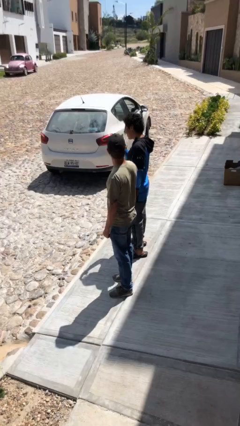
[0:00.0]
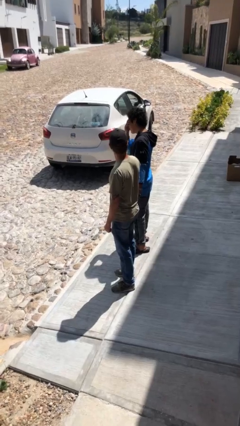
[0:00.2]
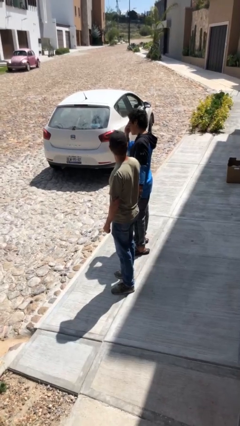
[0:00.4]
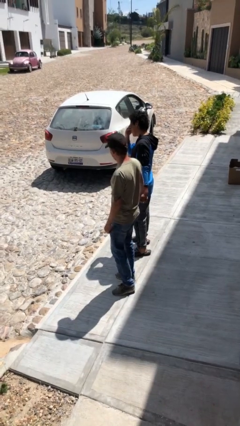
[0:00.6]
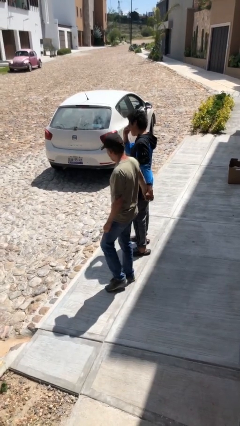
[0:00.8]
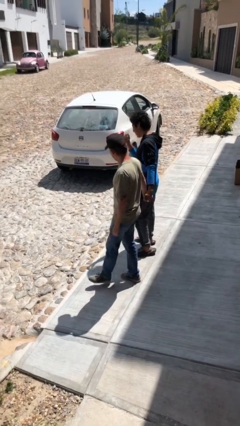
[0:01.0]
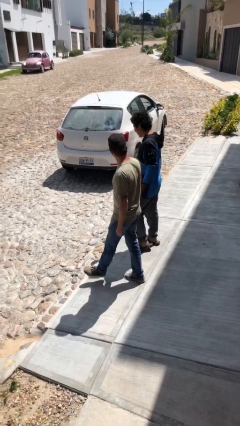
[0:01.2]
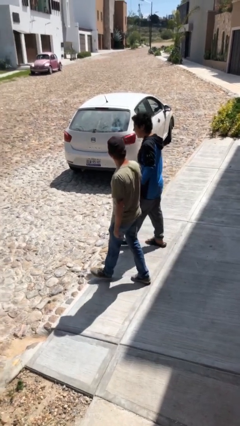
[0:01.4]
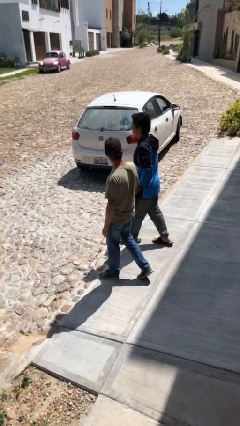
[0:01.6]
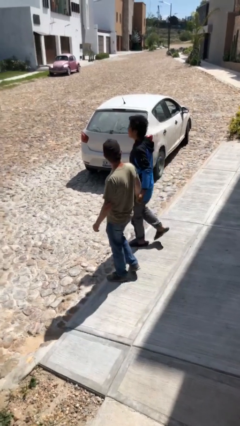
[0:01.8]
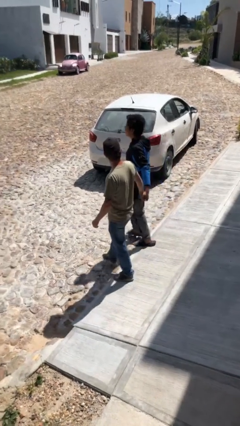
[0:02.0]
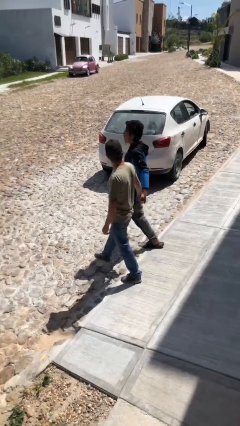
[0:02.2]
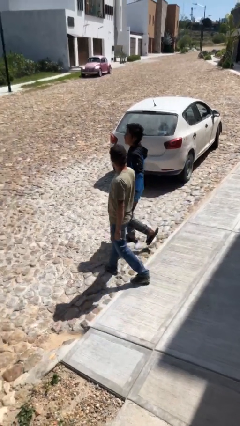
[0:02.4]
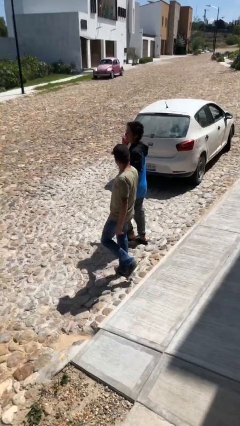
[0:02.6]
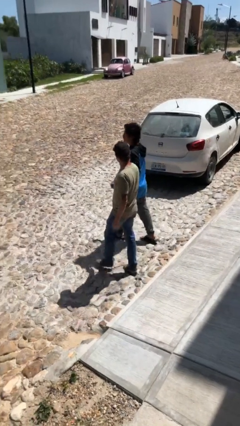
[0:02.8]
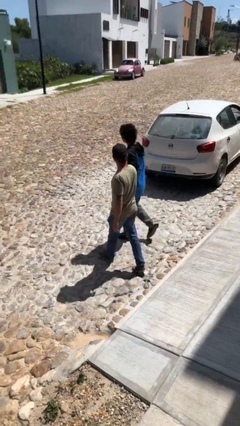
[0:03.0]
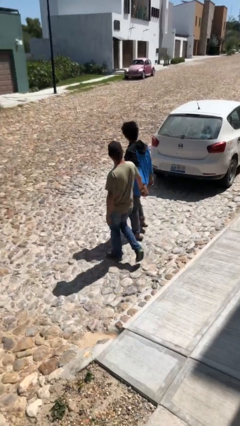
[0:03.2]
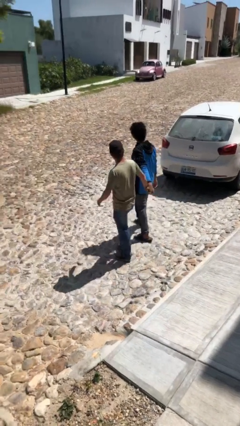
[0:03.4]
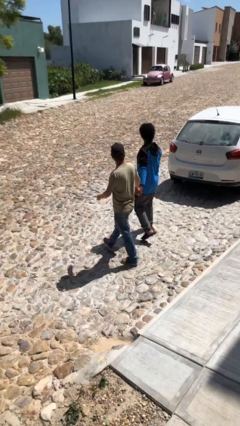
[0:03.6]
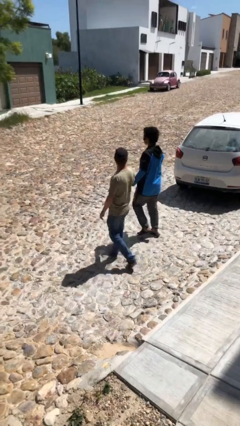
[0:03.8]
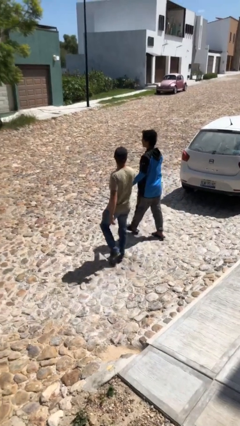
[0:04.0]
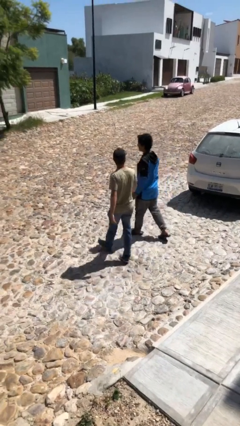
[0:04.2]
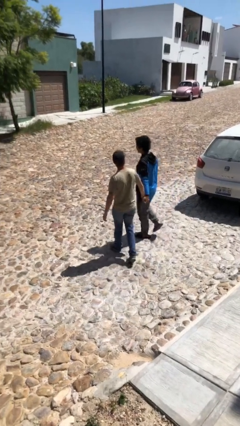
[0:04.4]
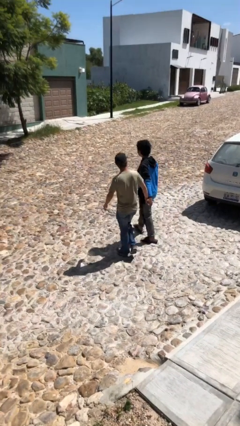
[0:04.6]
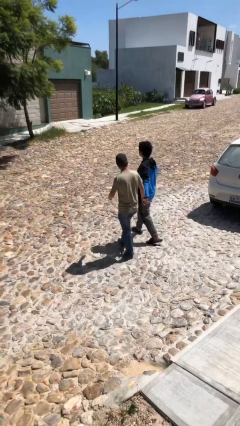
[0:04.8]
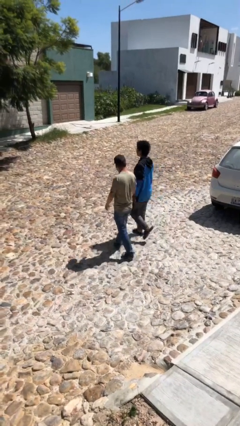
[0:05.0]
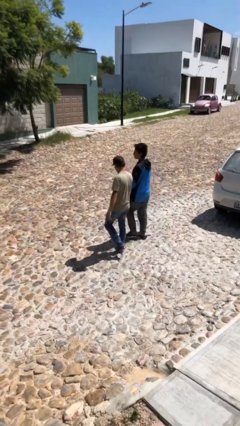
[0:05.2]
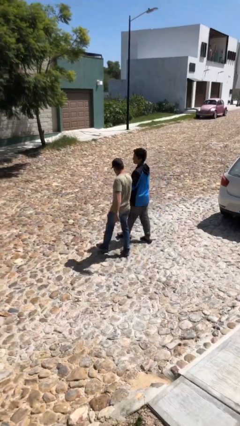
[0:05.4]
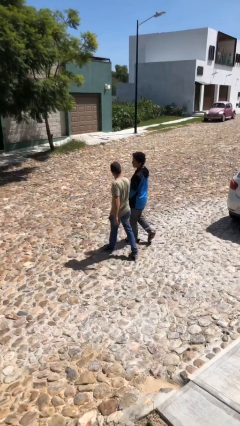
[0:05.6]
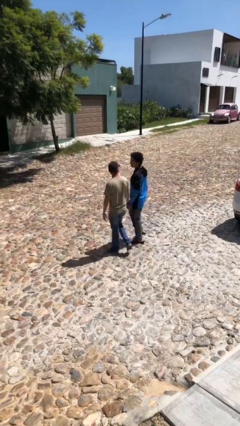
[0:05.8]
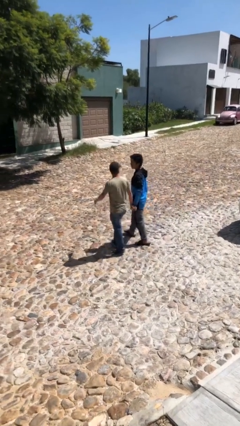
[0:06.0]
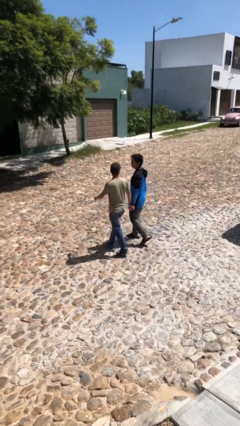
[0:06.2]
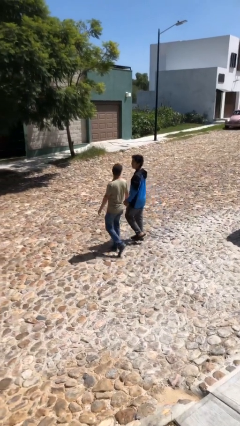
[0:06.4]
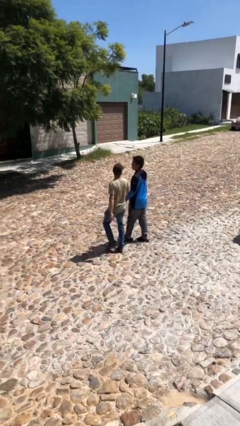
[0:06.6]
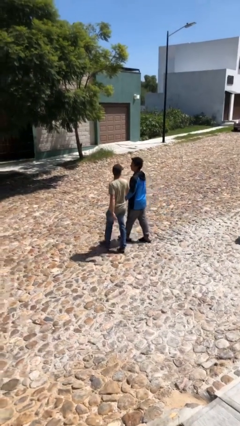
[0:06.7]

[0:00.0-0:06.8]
person holds hand

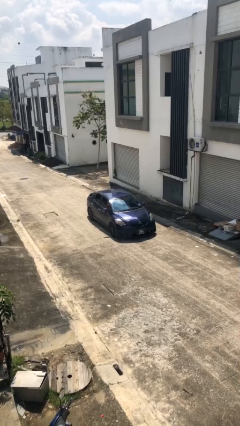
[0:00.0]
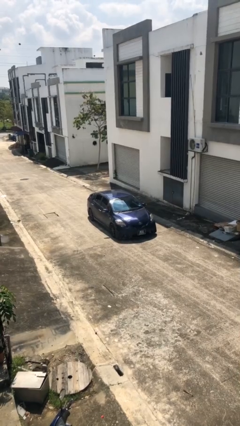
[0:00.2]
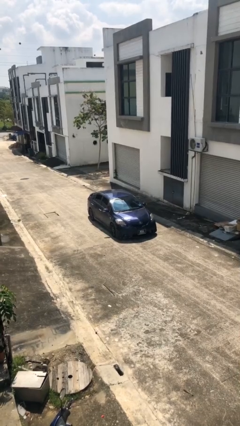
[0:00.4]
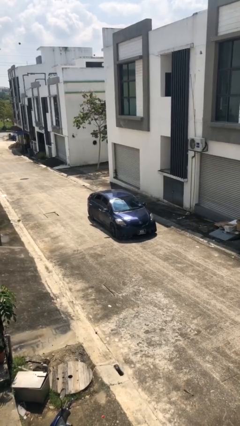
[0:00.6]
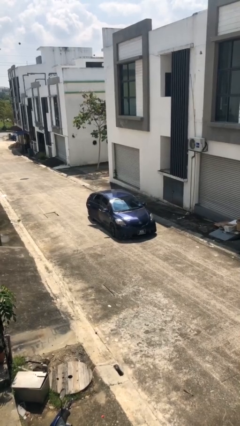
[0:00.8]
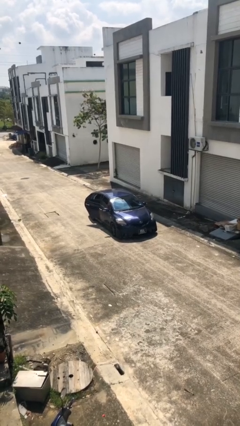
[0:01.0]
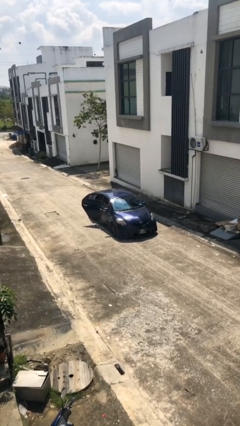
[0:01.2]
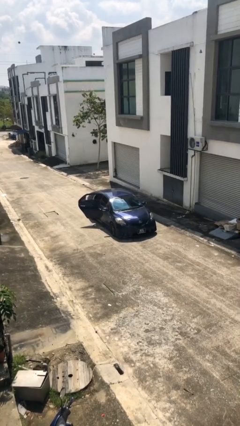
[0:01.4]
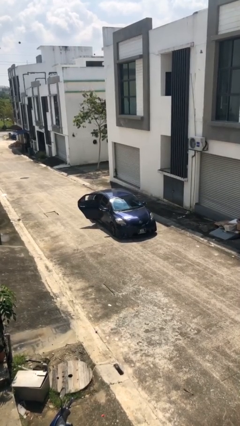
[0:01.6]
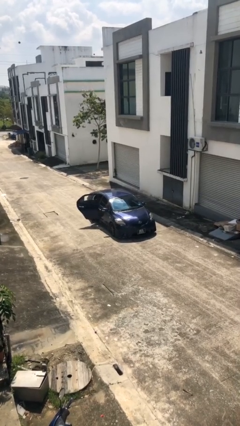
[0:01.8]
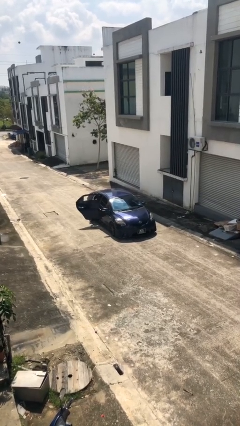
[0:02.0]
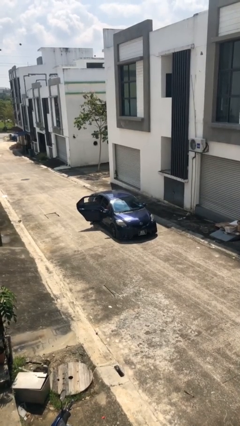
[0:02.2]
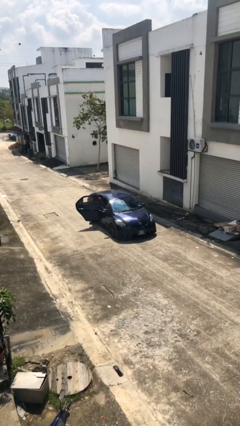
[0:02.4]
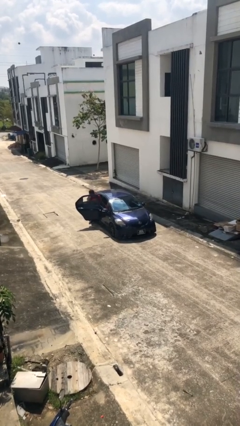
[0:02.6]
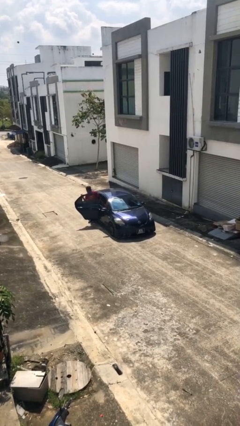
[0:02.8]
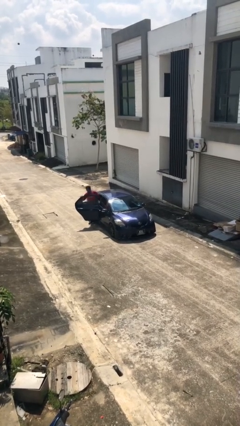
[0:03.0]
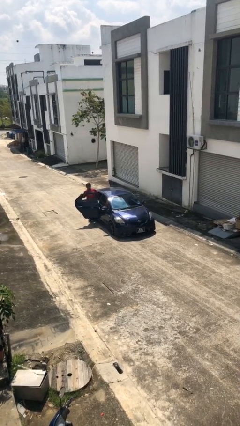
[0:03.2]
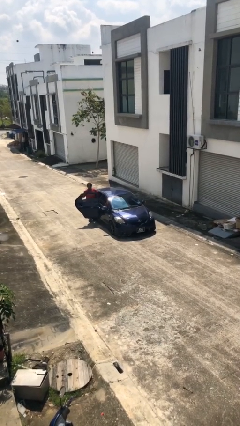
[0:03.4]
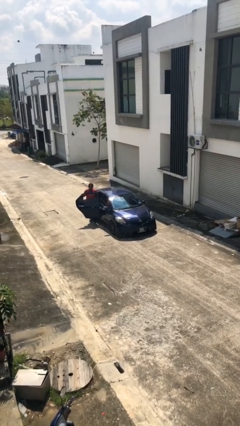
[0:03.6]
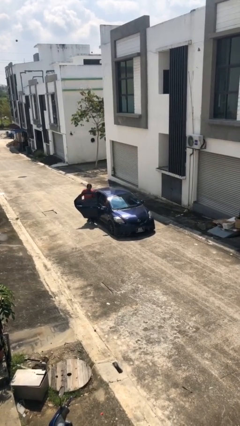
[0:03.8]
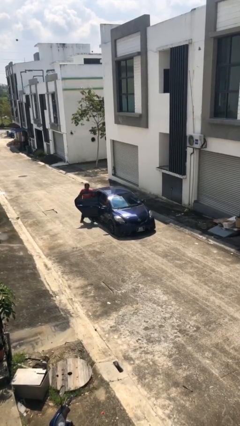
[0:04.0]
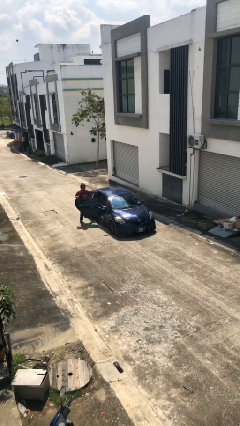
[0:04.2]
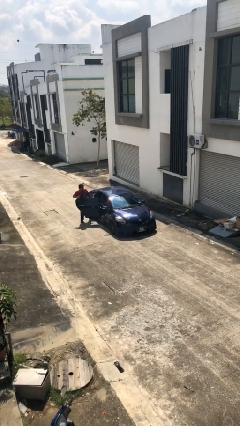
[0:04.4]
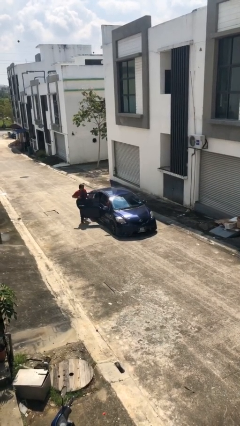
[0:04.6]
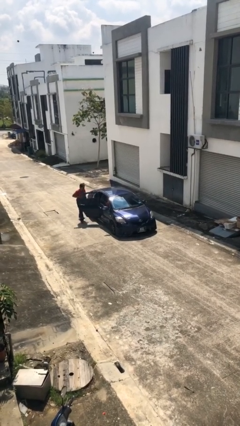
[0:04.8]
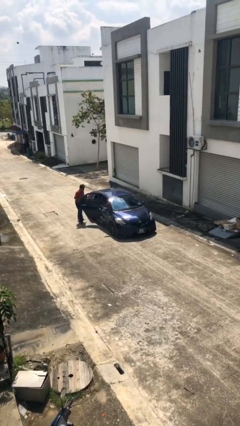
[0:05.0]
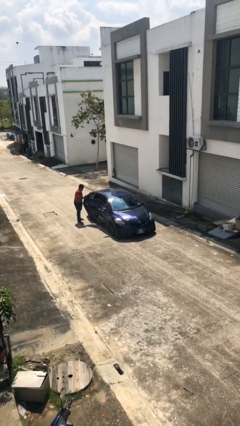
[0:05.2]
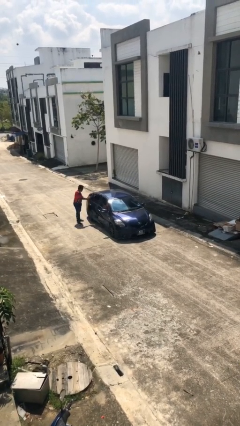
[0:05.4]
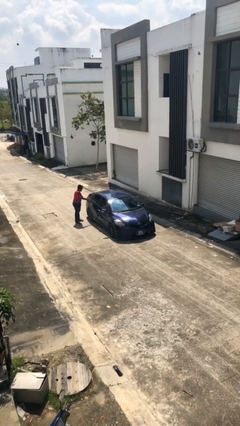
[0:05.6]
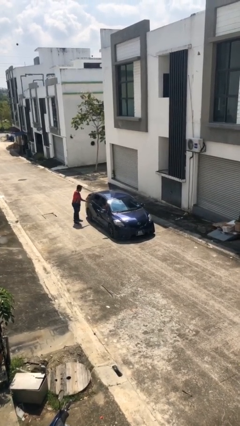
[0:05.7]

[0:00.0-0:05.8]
car drops off person

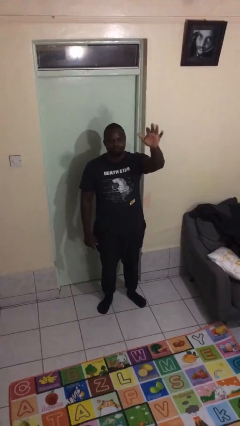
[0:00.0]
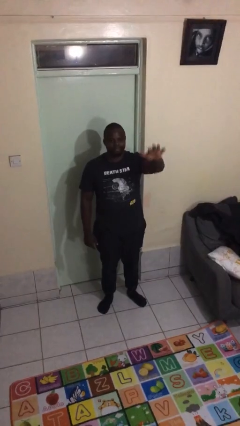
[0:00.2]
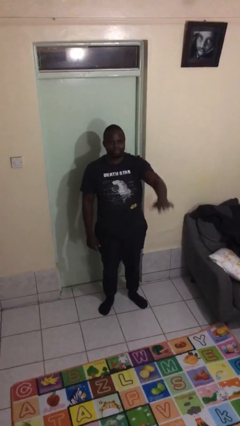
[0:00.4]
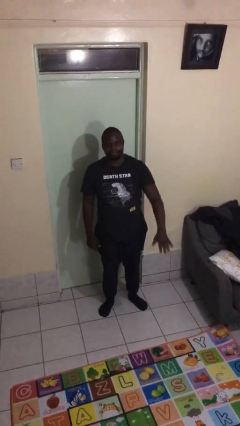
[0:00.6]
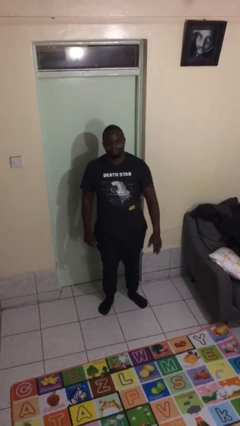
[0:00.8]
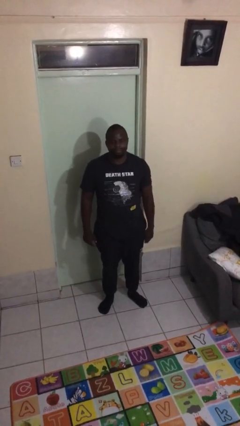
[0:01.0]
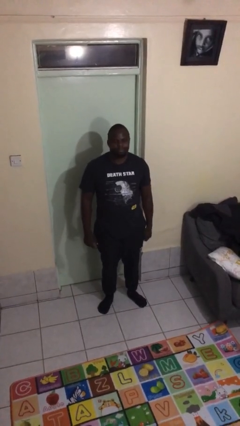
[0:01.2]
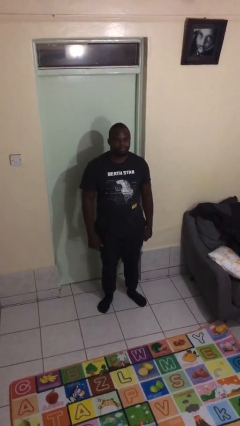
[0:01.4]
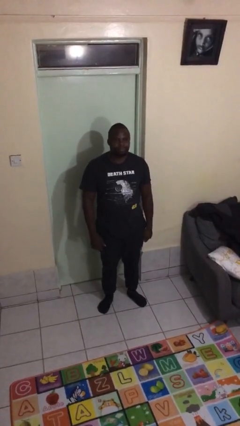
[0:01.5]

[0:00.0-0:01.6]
person gestures swipe down

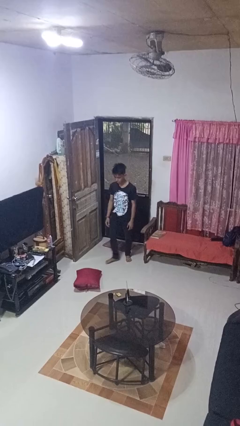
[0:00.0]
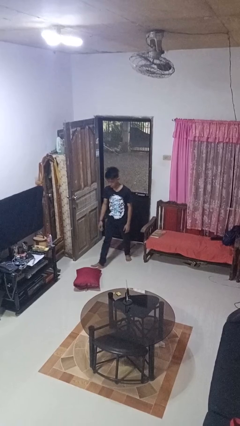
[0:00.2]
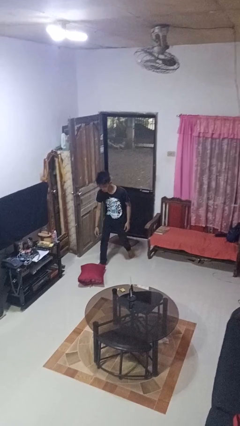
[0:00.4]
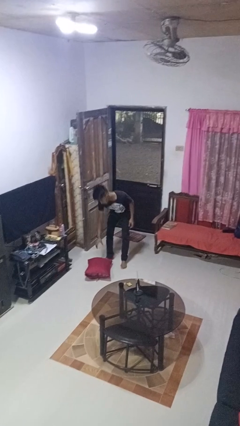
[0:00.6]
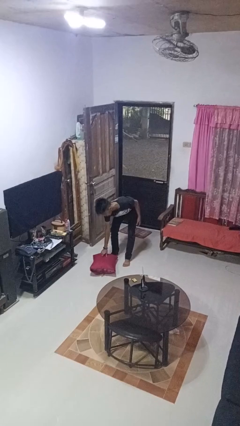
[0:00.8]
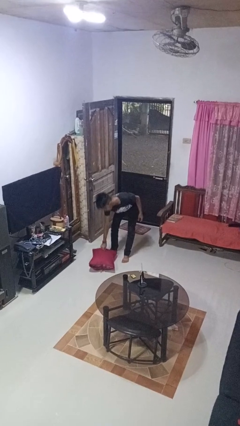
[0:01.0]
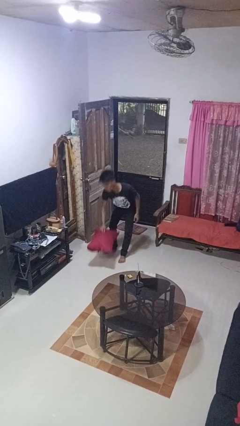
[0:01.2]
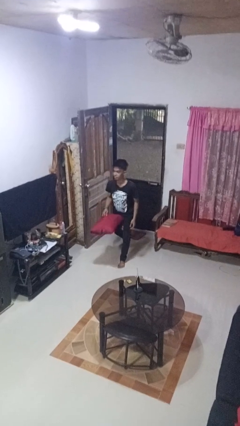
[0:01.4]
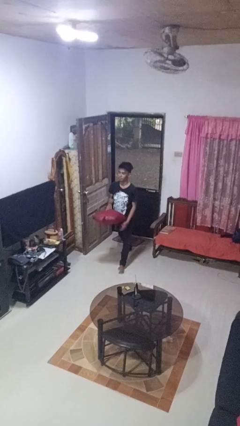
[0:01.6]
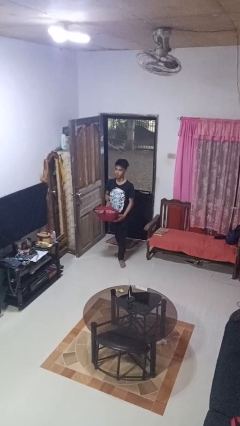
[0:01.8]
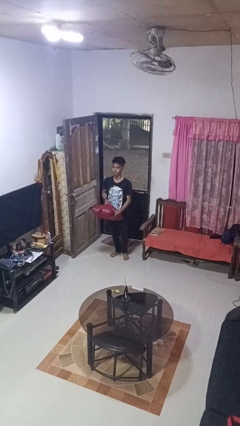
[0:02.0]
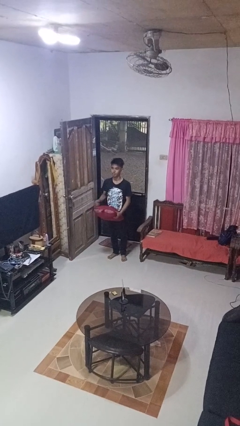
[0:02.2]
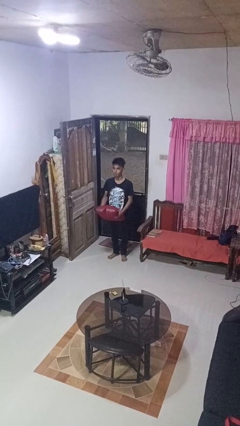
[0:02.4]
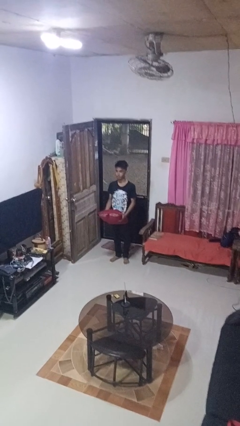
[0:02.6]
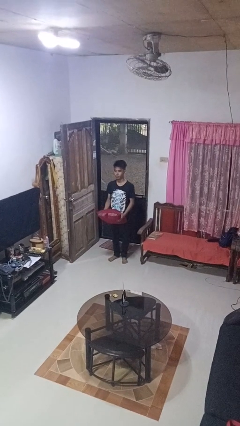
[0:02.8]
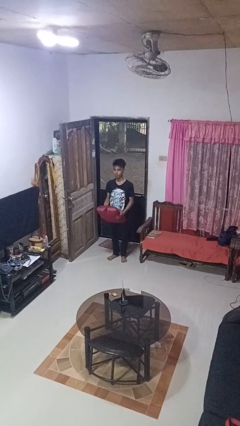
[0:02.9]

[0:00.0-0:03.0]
person picks up object from floor

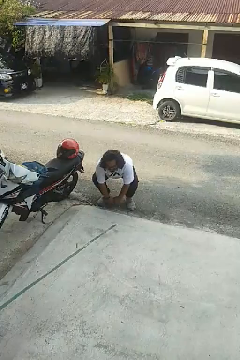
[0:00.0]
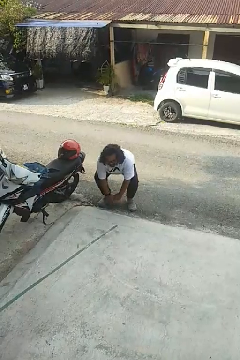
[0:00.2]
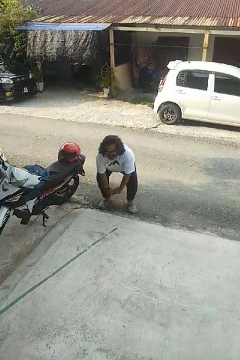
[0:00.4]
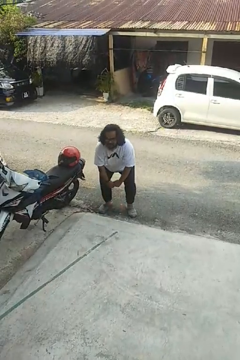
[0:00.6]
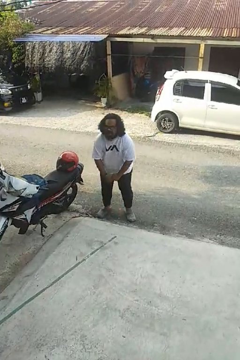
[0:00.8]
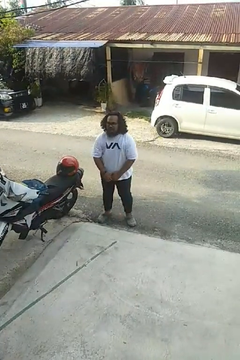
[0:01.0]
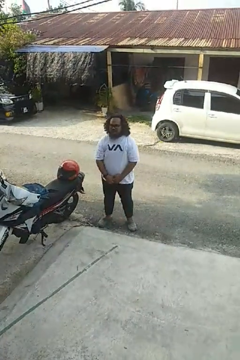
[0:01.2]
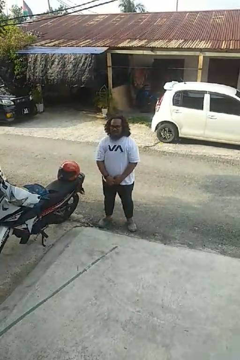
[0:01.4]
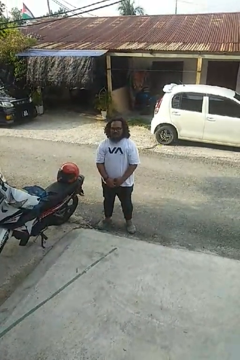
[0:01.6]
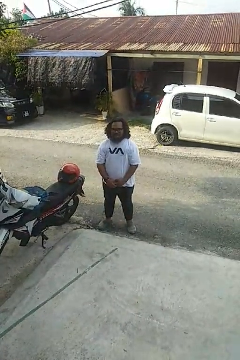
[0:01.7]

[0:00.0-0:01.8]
person stands up
